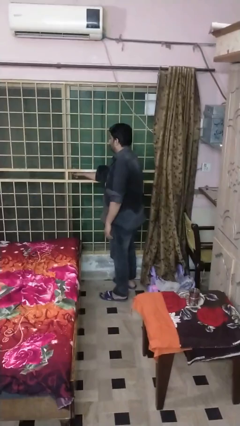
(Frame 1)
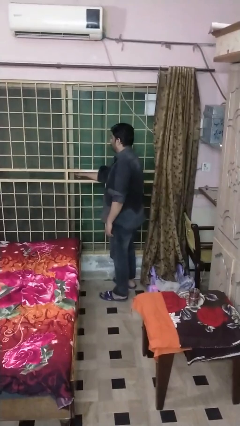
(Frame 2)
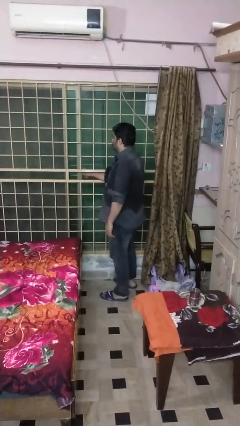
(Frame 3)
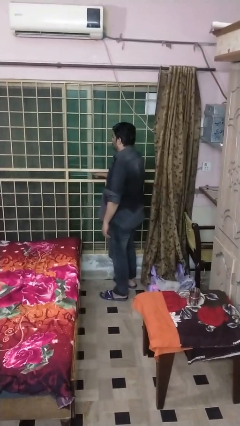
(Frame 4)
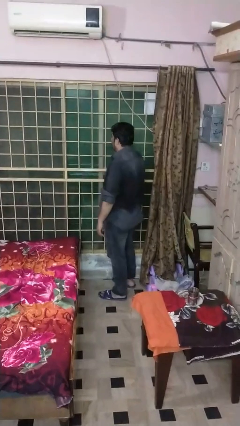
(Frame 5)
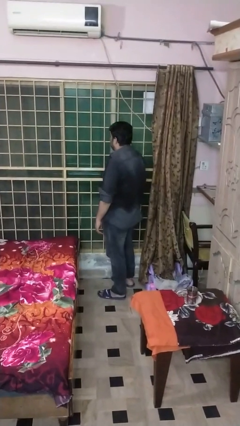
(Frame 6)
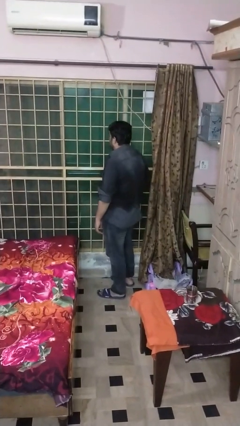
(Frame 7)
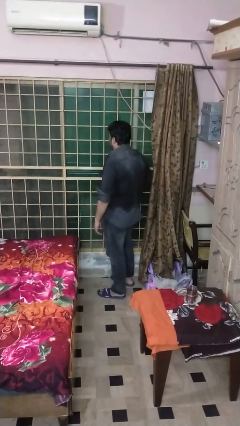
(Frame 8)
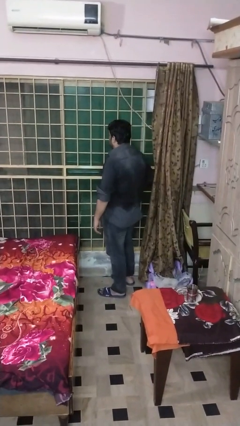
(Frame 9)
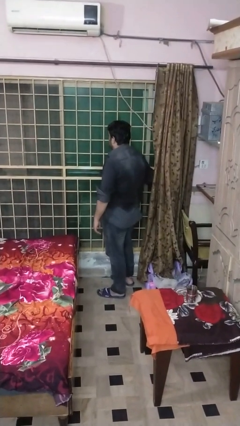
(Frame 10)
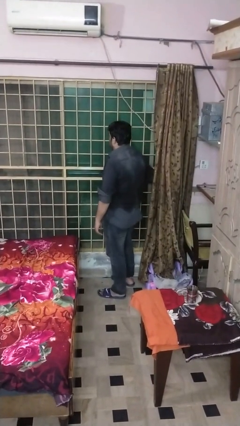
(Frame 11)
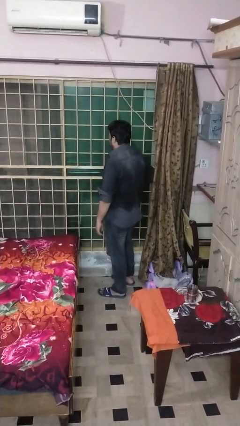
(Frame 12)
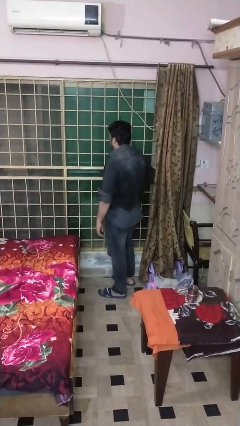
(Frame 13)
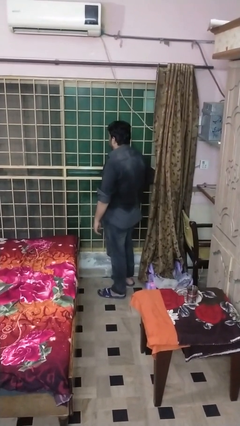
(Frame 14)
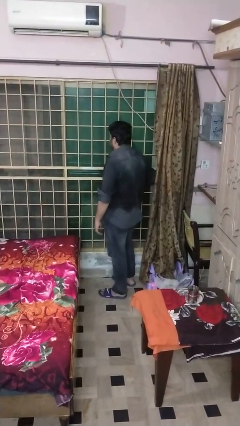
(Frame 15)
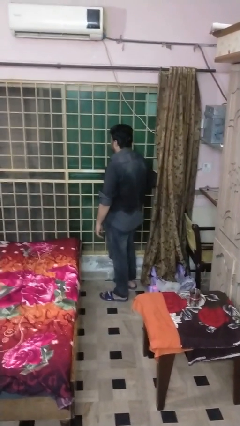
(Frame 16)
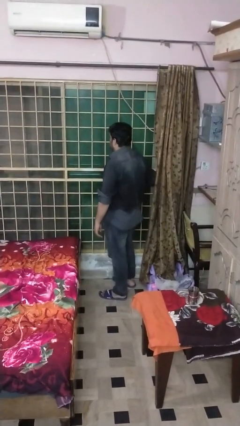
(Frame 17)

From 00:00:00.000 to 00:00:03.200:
person opens sliding door

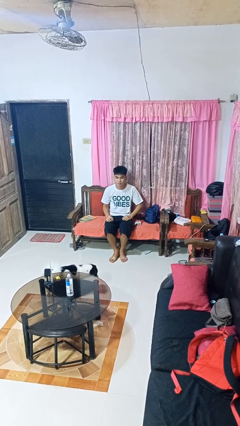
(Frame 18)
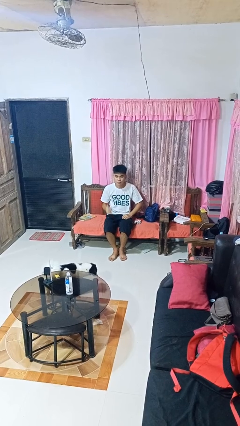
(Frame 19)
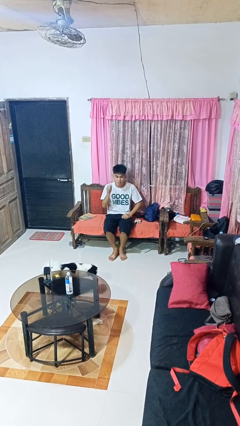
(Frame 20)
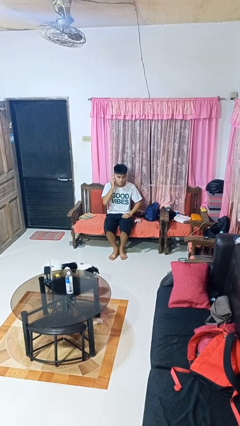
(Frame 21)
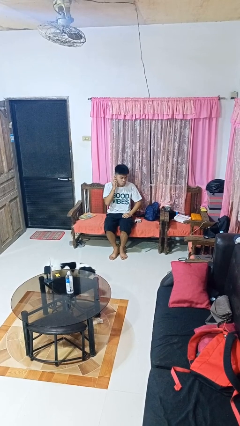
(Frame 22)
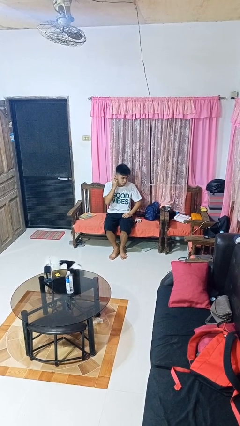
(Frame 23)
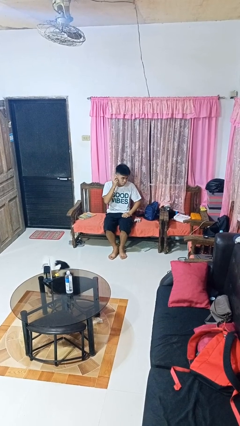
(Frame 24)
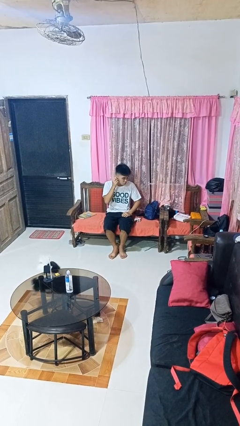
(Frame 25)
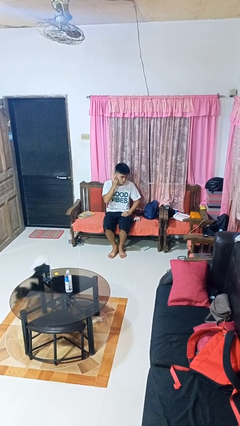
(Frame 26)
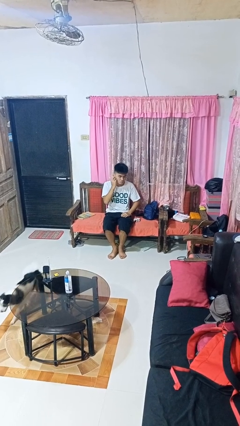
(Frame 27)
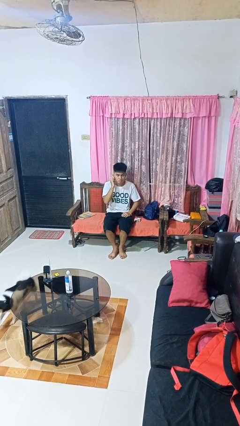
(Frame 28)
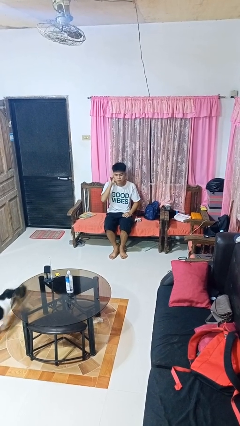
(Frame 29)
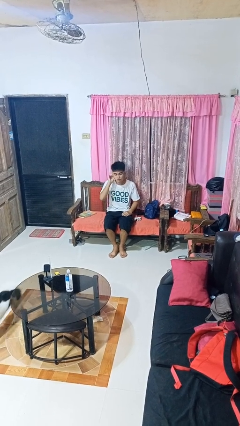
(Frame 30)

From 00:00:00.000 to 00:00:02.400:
person touches earlobe

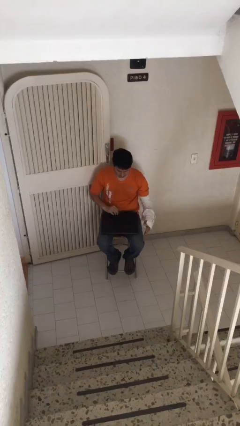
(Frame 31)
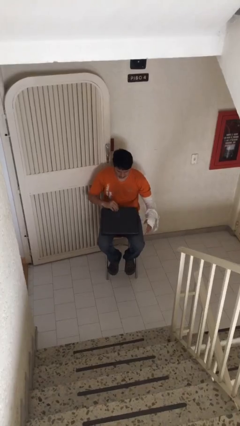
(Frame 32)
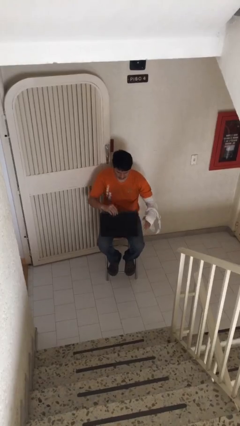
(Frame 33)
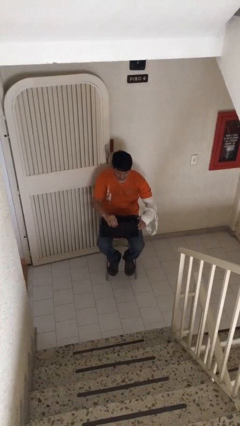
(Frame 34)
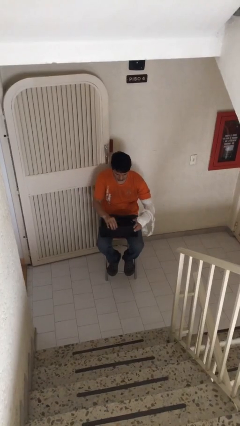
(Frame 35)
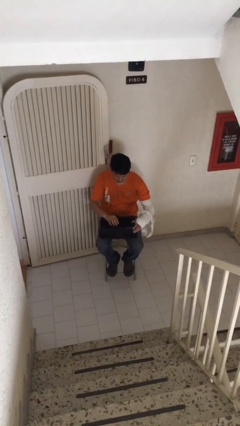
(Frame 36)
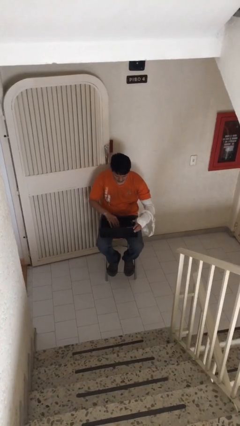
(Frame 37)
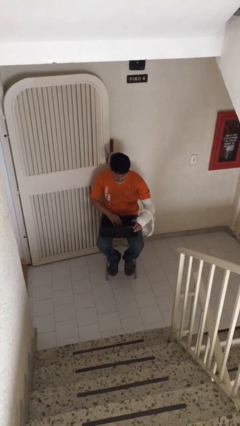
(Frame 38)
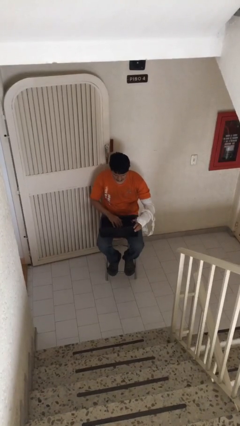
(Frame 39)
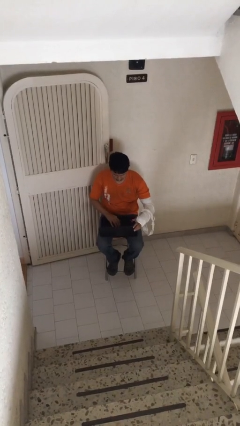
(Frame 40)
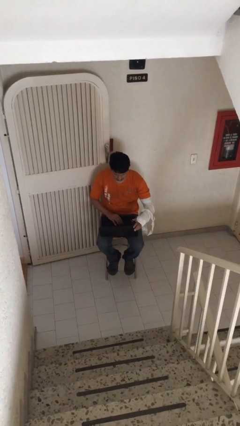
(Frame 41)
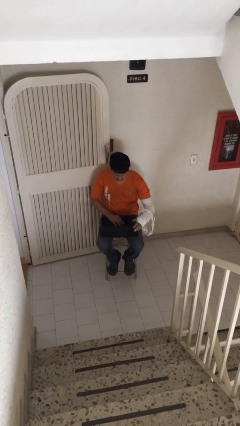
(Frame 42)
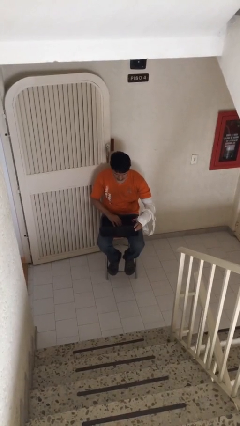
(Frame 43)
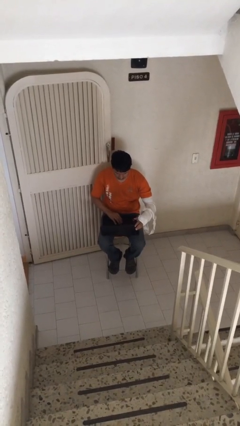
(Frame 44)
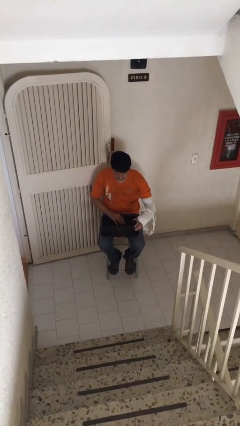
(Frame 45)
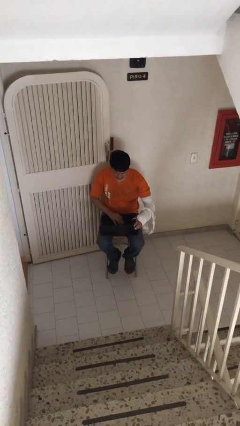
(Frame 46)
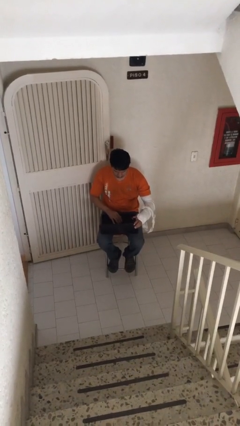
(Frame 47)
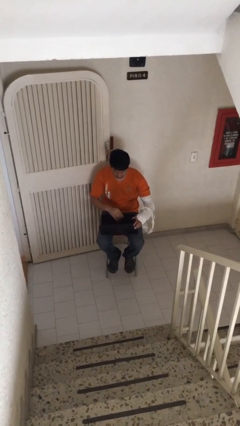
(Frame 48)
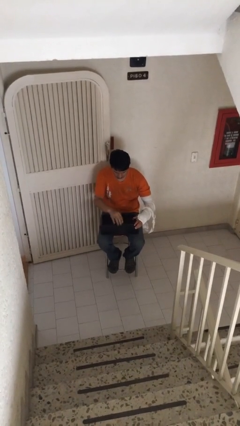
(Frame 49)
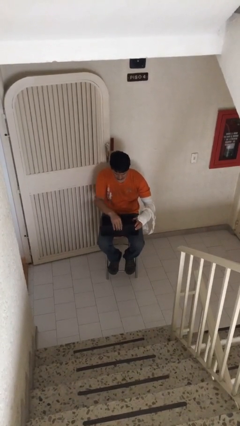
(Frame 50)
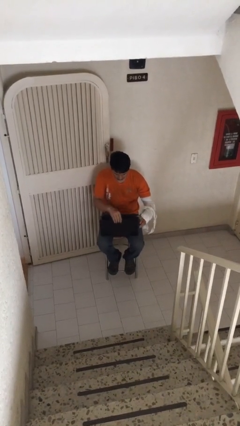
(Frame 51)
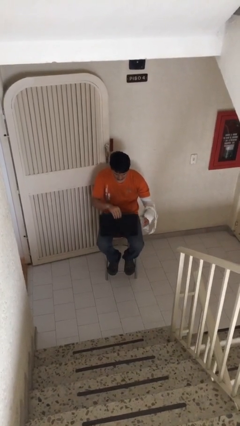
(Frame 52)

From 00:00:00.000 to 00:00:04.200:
person interacts with laptop

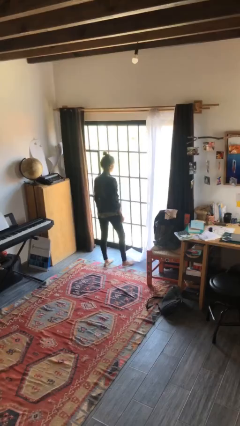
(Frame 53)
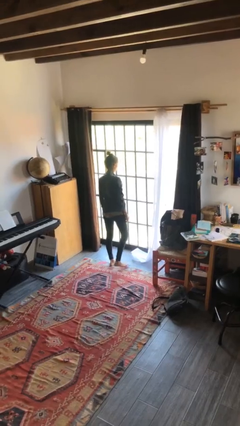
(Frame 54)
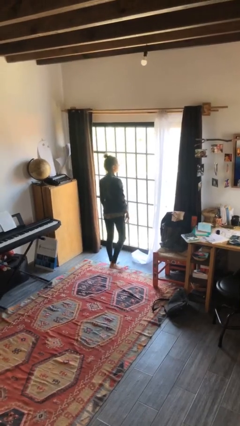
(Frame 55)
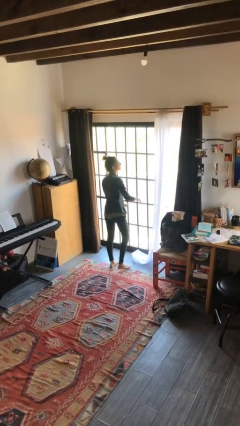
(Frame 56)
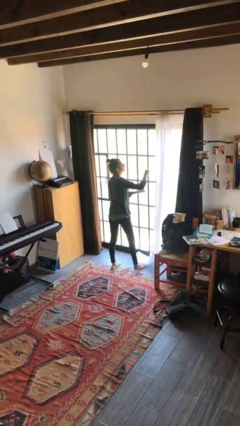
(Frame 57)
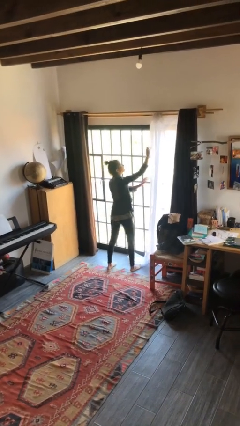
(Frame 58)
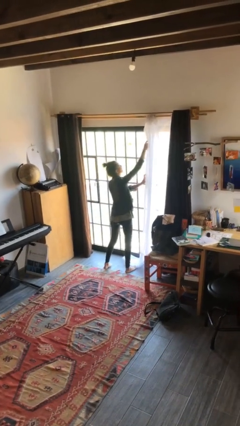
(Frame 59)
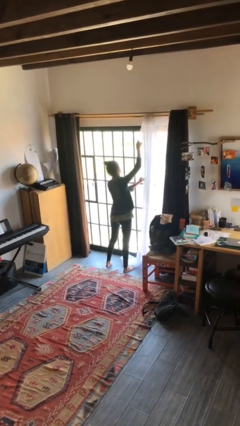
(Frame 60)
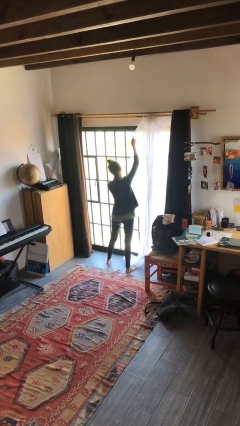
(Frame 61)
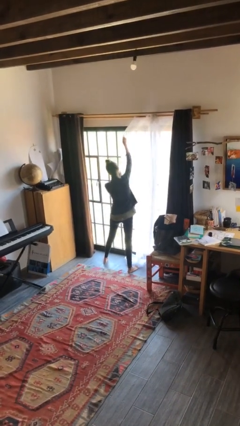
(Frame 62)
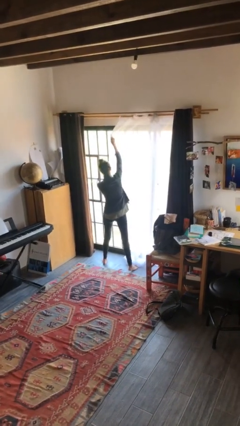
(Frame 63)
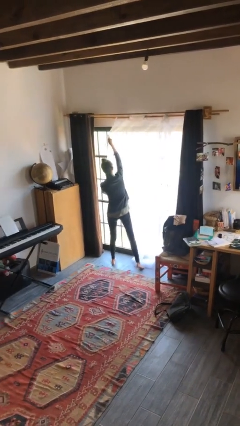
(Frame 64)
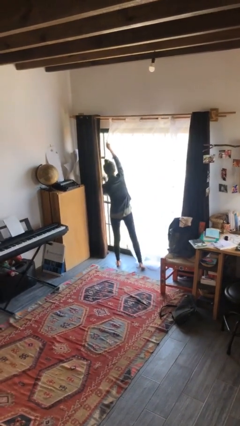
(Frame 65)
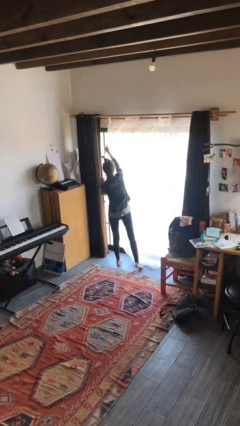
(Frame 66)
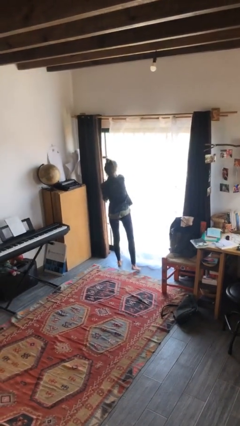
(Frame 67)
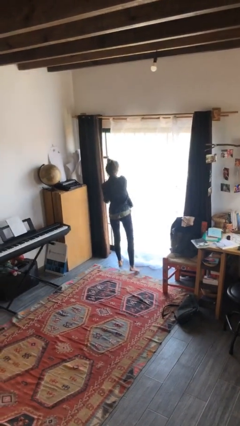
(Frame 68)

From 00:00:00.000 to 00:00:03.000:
person closes curtains

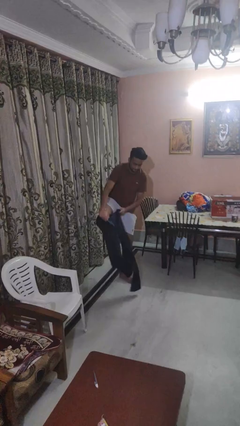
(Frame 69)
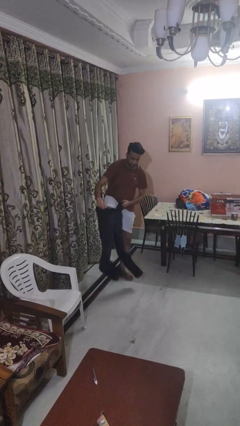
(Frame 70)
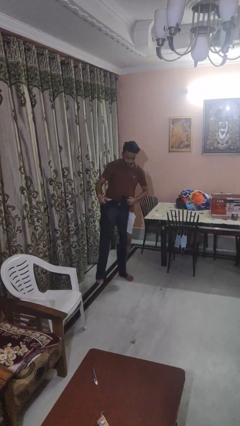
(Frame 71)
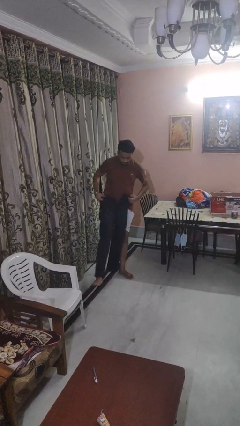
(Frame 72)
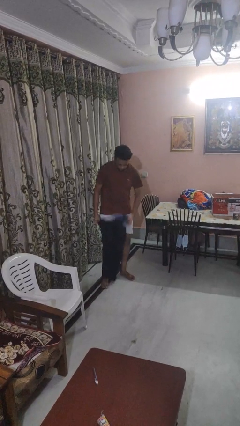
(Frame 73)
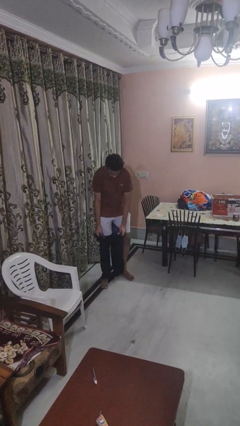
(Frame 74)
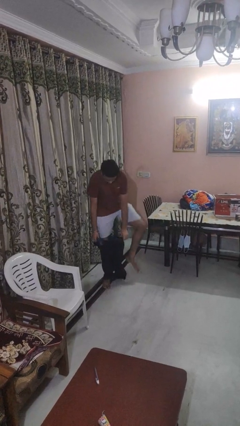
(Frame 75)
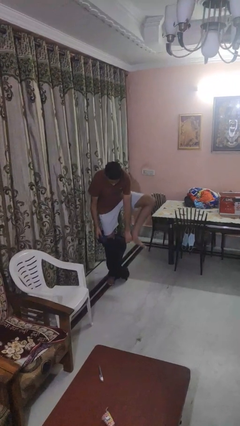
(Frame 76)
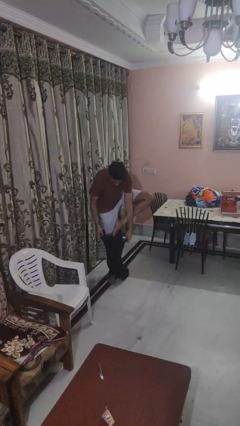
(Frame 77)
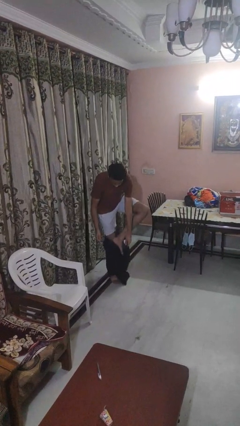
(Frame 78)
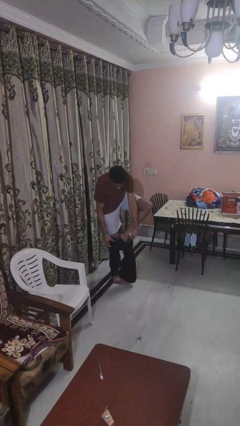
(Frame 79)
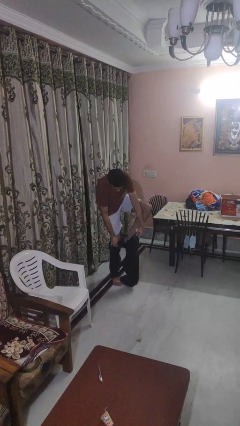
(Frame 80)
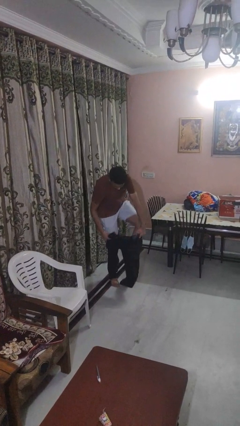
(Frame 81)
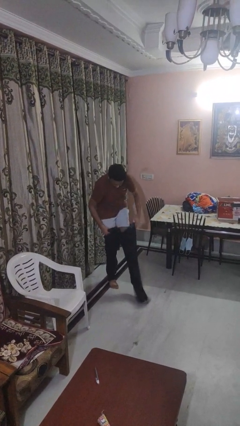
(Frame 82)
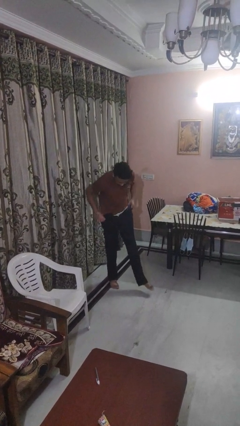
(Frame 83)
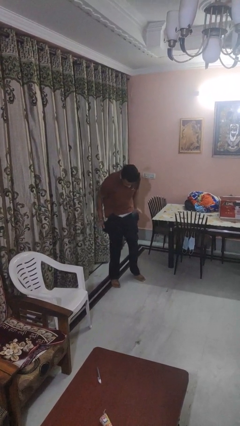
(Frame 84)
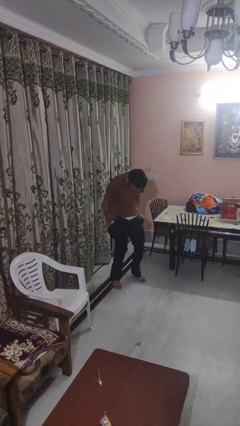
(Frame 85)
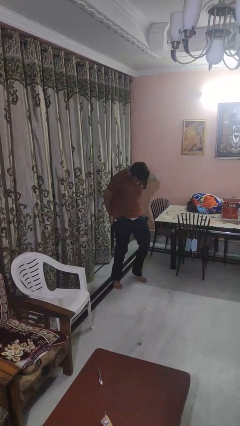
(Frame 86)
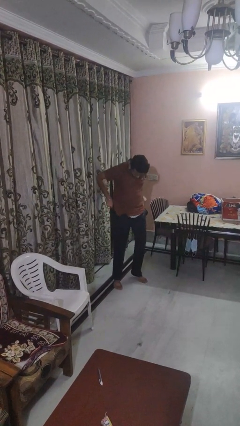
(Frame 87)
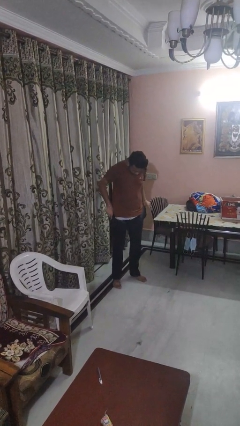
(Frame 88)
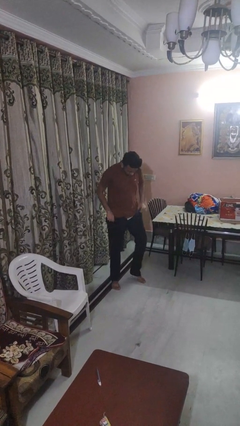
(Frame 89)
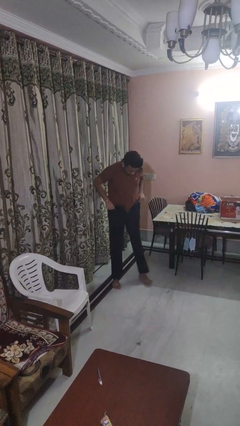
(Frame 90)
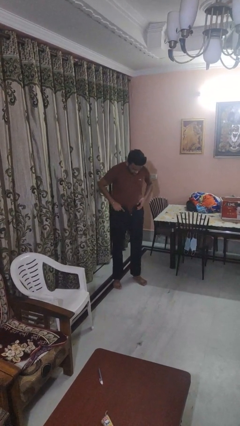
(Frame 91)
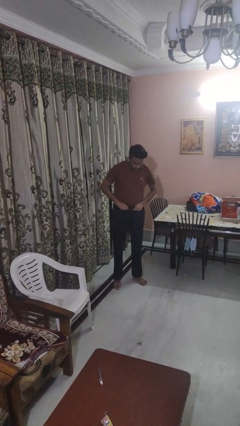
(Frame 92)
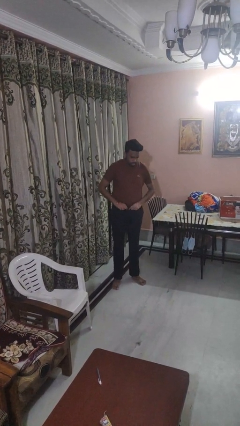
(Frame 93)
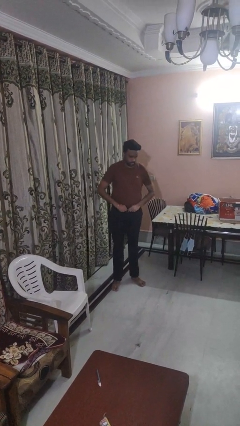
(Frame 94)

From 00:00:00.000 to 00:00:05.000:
person puts on pants
